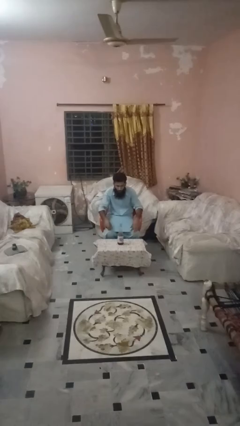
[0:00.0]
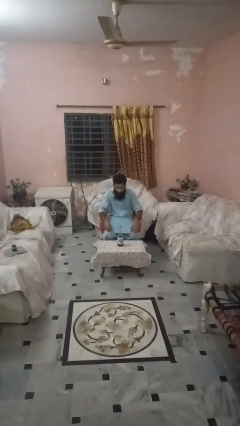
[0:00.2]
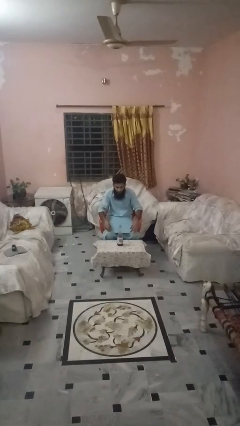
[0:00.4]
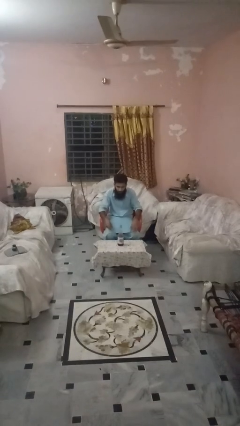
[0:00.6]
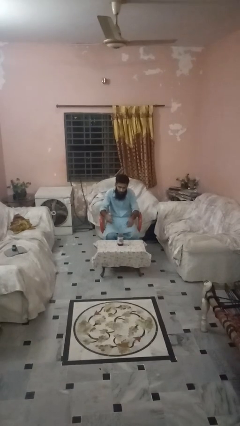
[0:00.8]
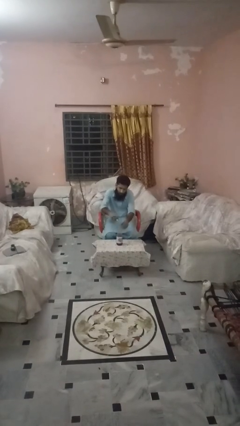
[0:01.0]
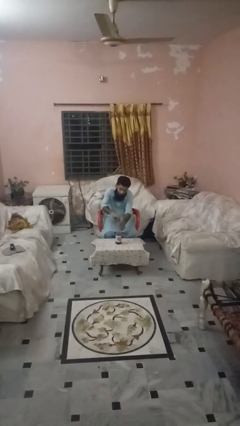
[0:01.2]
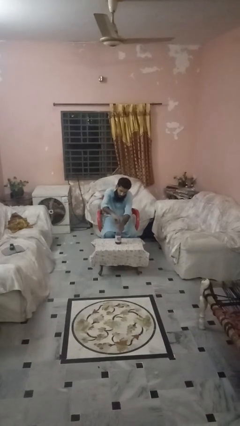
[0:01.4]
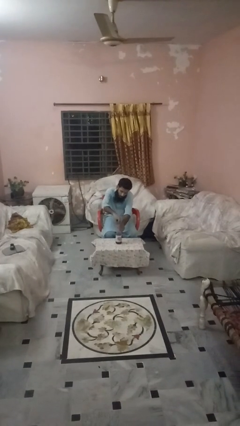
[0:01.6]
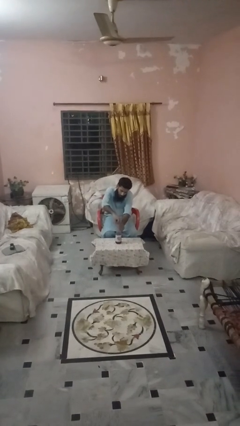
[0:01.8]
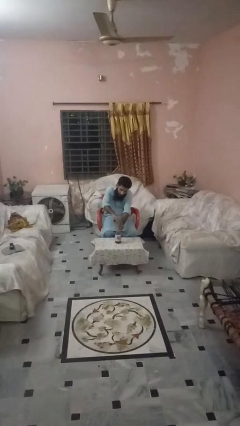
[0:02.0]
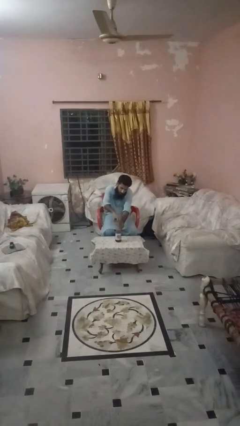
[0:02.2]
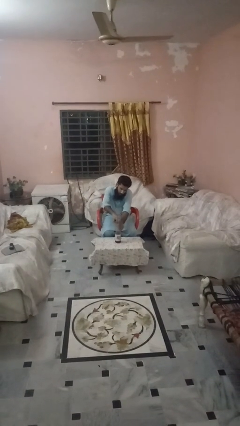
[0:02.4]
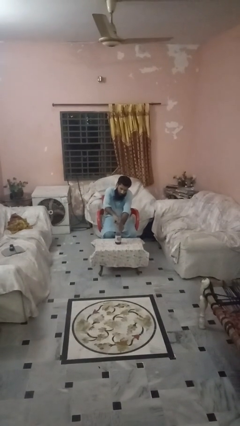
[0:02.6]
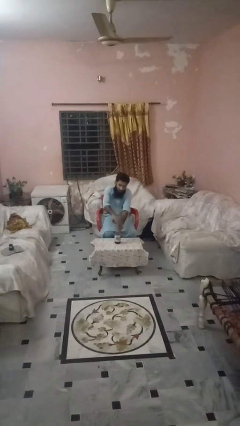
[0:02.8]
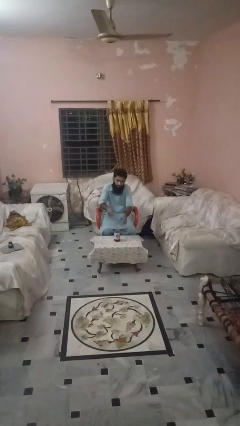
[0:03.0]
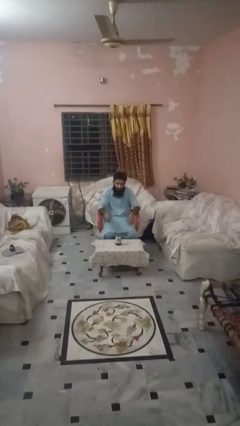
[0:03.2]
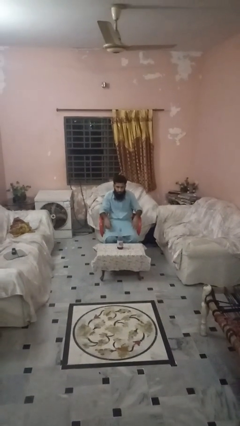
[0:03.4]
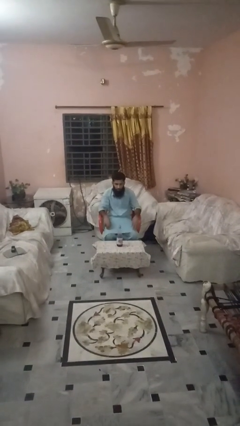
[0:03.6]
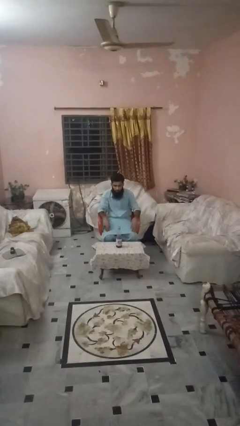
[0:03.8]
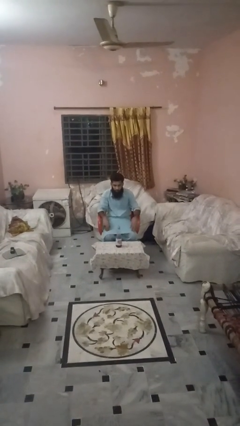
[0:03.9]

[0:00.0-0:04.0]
person screws lid to bottle

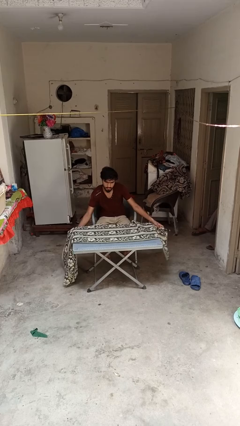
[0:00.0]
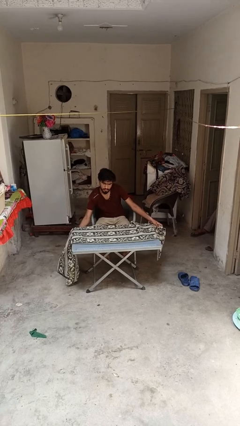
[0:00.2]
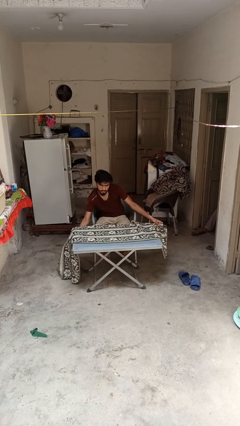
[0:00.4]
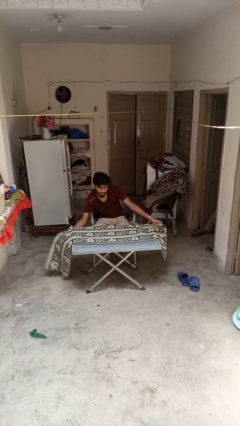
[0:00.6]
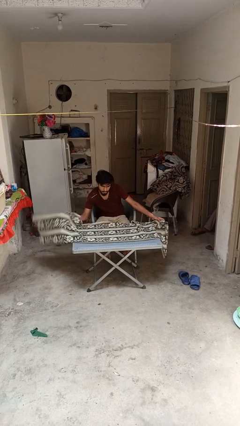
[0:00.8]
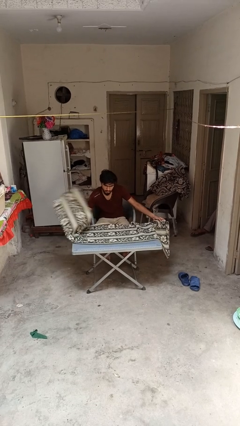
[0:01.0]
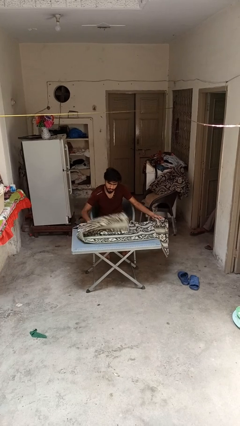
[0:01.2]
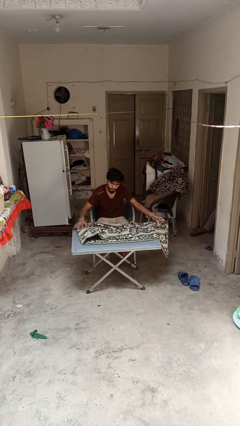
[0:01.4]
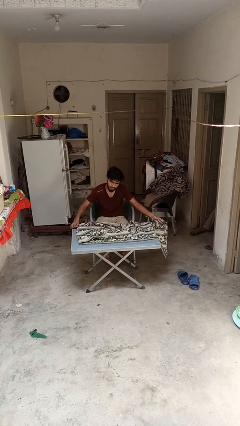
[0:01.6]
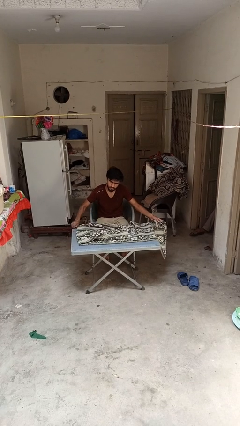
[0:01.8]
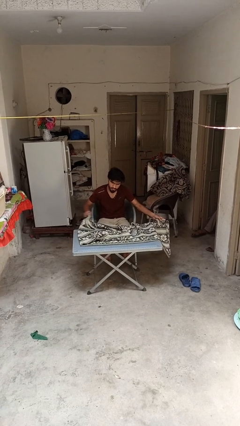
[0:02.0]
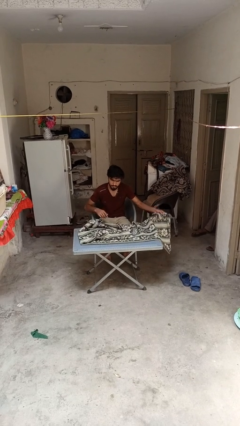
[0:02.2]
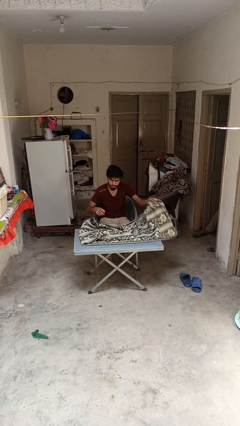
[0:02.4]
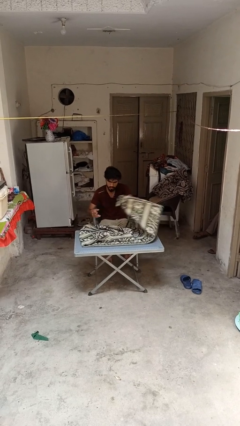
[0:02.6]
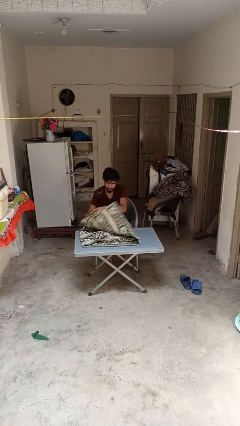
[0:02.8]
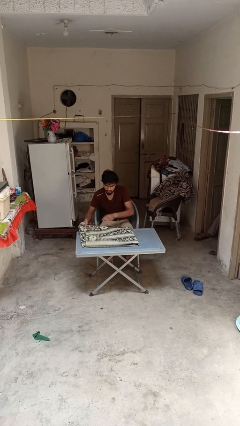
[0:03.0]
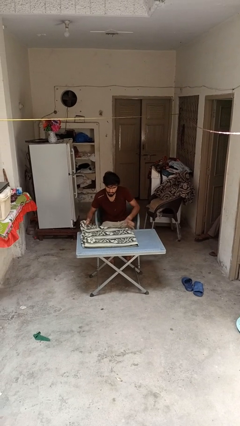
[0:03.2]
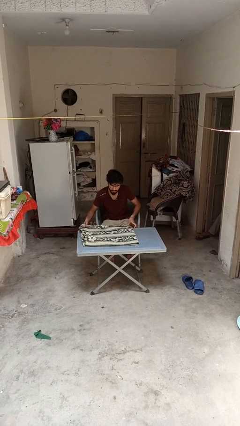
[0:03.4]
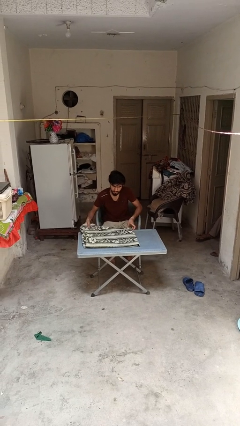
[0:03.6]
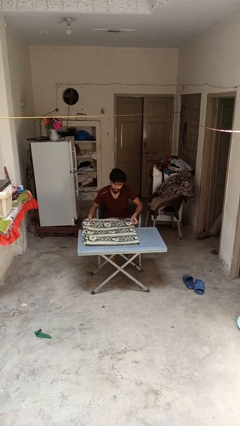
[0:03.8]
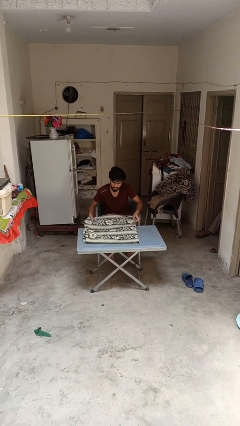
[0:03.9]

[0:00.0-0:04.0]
person folds tablecloth

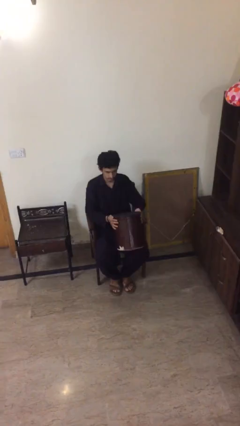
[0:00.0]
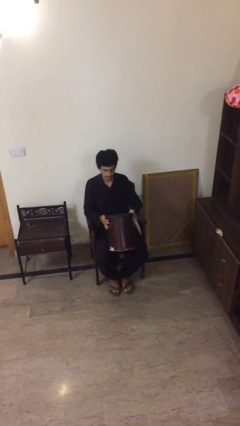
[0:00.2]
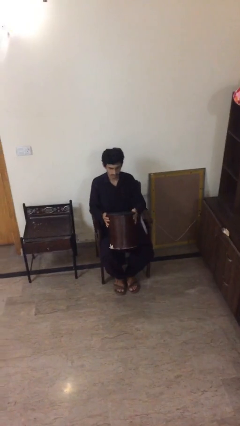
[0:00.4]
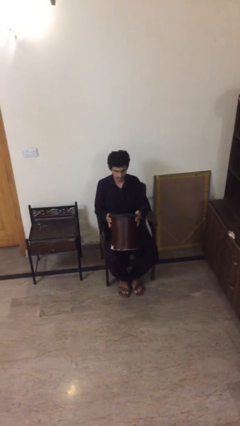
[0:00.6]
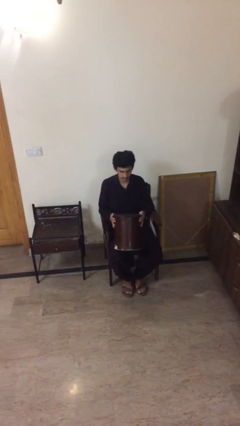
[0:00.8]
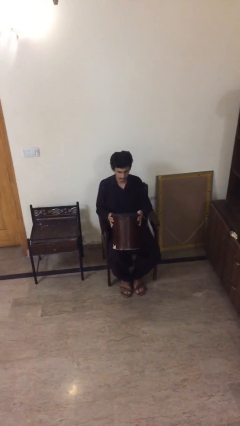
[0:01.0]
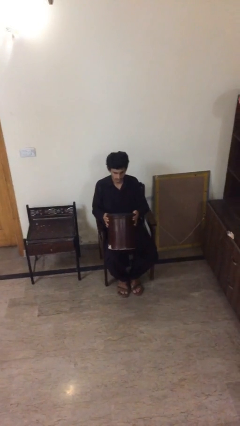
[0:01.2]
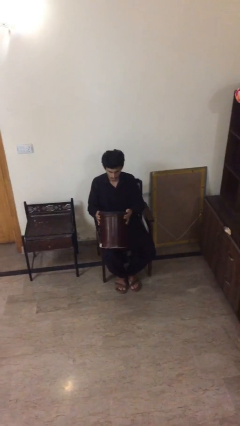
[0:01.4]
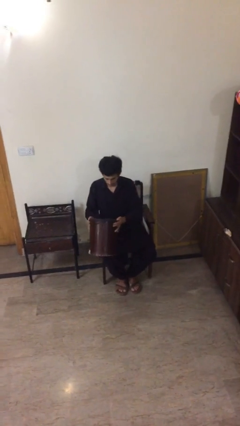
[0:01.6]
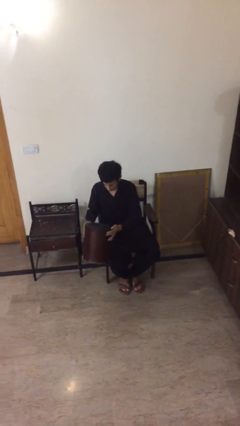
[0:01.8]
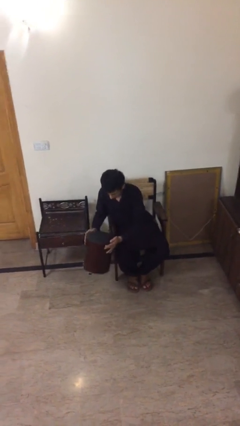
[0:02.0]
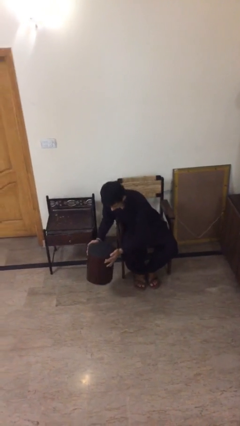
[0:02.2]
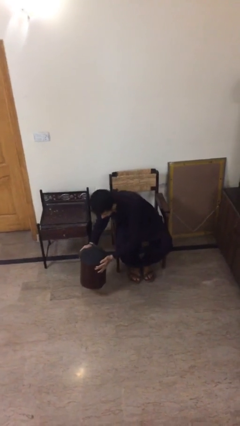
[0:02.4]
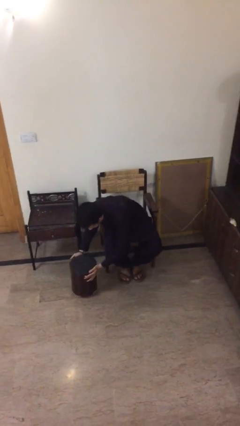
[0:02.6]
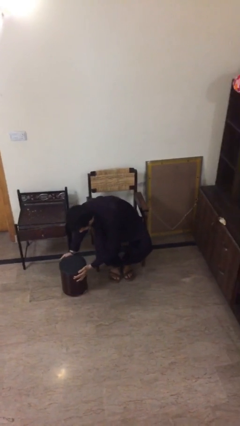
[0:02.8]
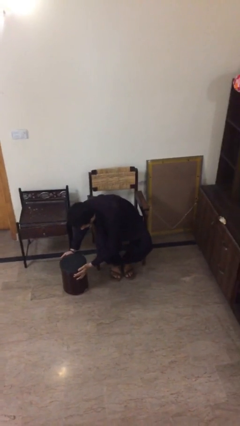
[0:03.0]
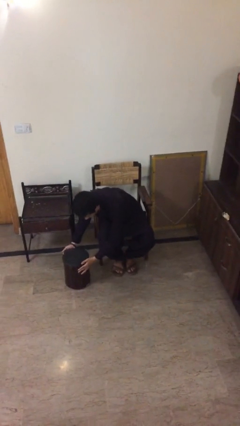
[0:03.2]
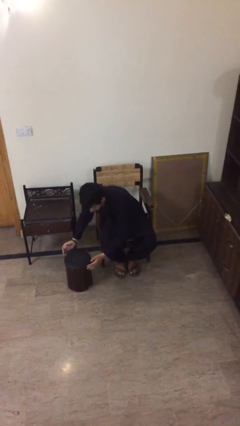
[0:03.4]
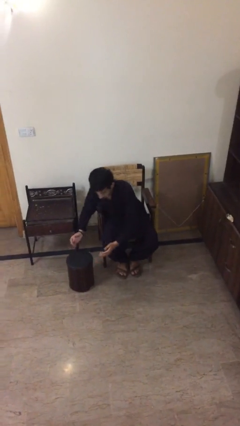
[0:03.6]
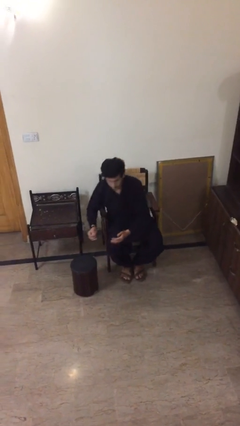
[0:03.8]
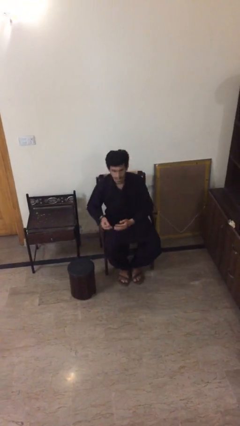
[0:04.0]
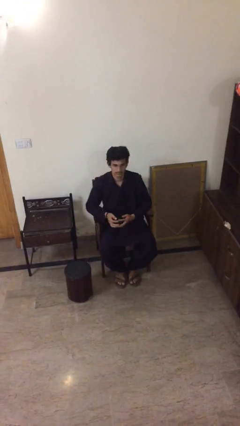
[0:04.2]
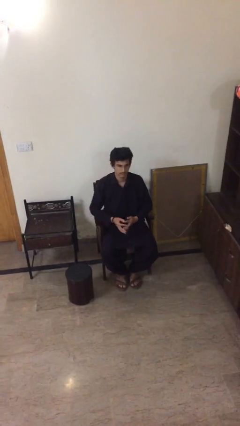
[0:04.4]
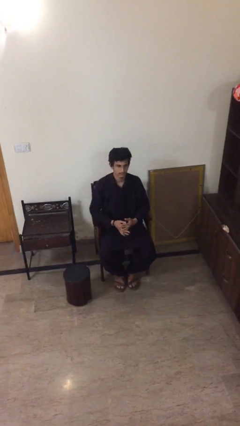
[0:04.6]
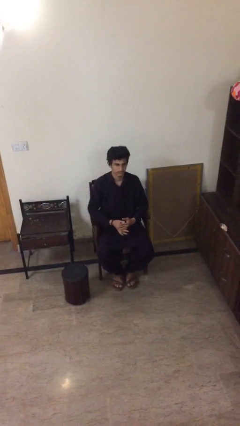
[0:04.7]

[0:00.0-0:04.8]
person puts down object on floor

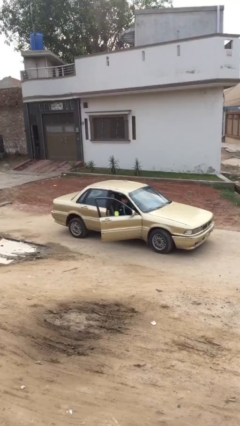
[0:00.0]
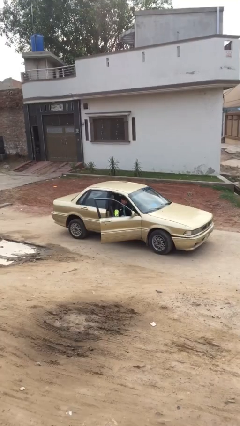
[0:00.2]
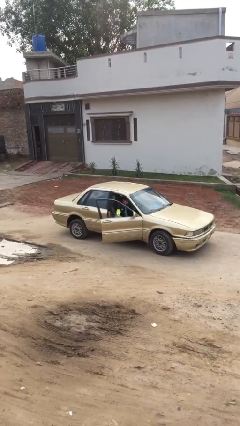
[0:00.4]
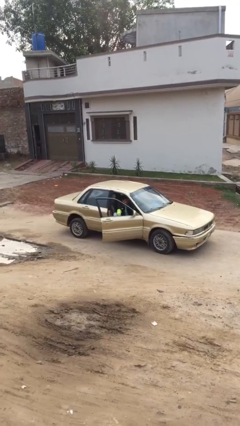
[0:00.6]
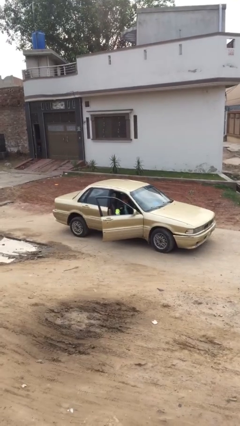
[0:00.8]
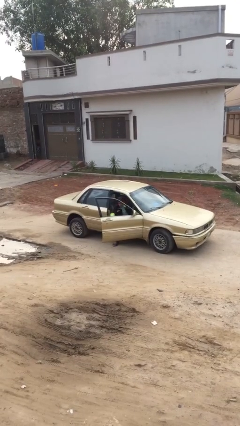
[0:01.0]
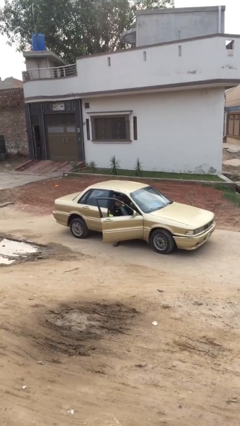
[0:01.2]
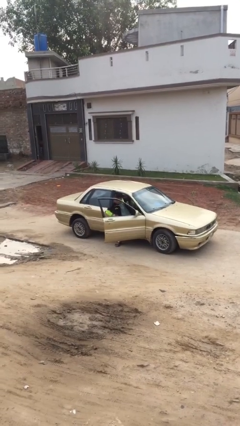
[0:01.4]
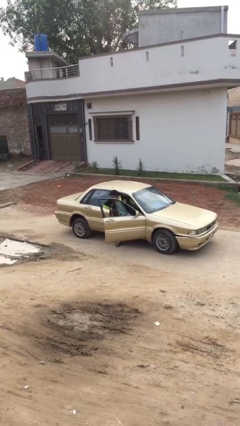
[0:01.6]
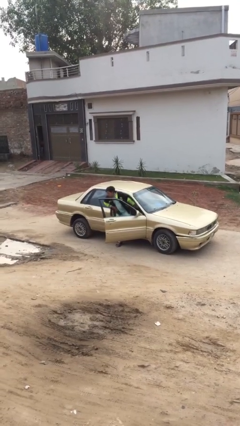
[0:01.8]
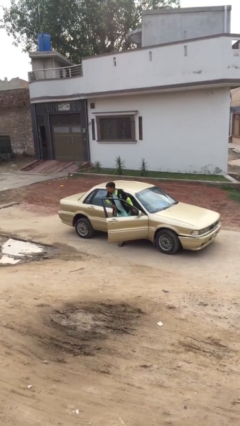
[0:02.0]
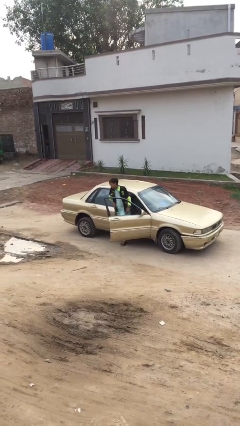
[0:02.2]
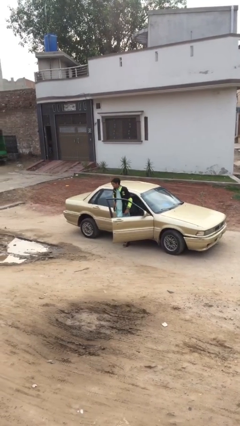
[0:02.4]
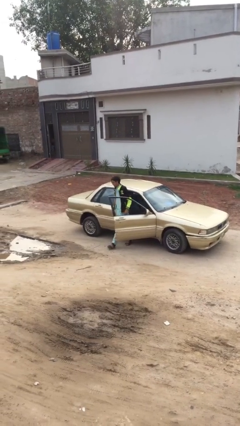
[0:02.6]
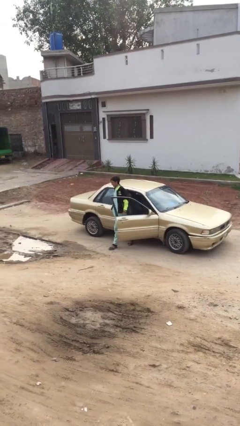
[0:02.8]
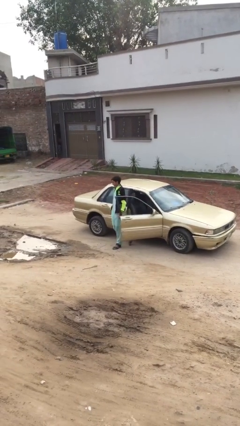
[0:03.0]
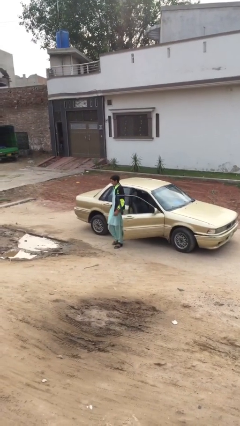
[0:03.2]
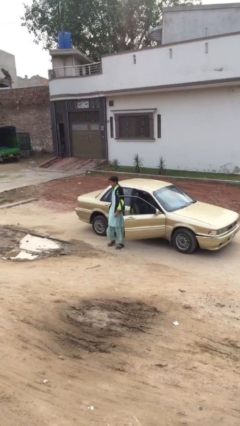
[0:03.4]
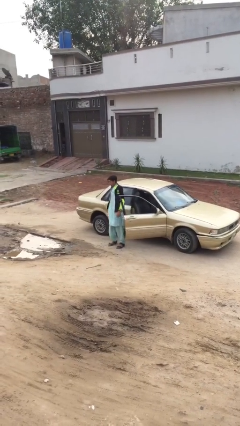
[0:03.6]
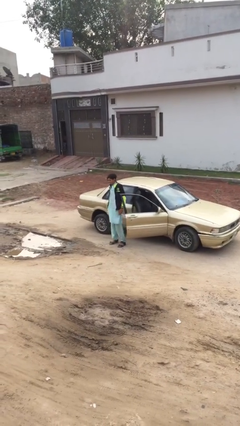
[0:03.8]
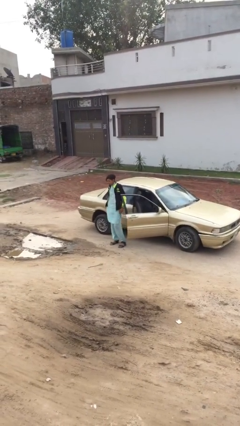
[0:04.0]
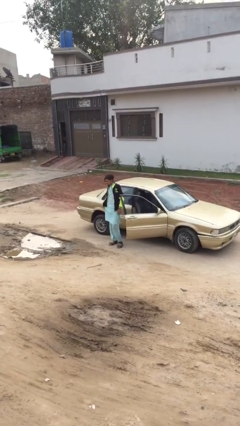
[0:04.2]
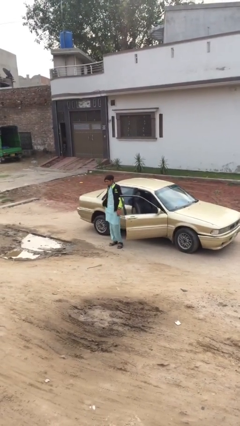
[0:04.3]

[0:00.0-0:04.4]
person exits car

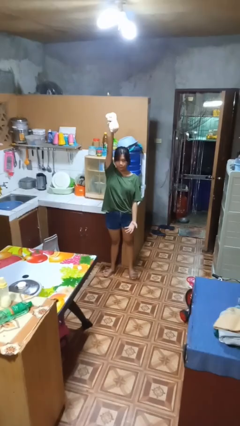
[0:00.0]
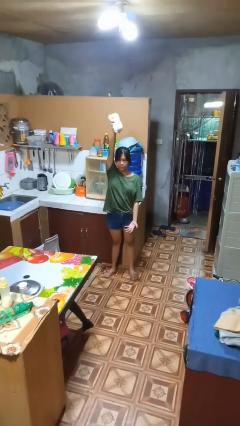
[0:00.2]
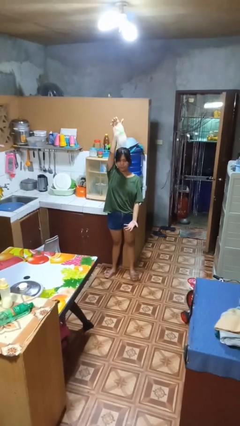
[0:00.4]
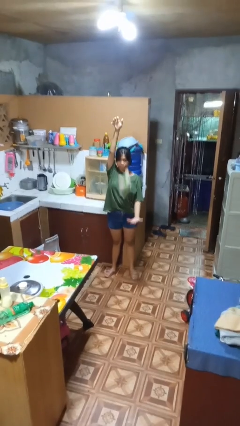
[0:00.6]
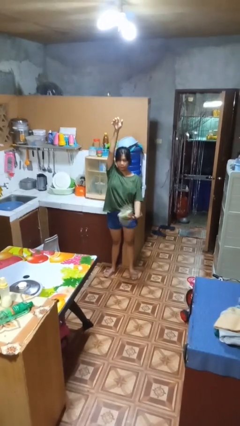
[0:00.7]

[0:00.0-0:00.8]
person drops object
